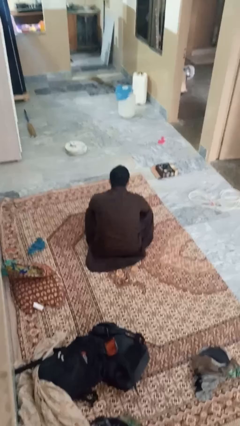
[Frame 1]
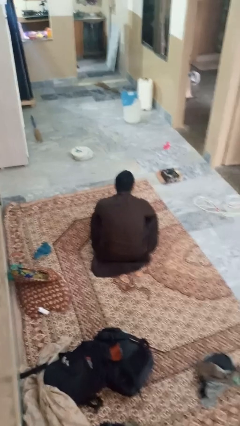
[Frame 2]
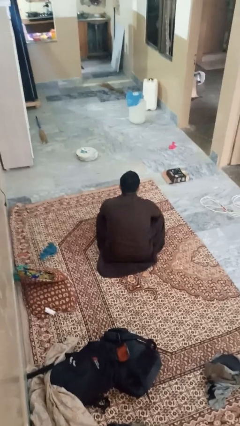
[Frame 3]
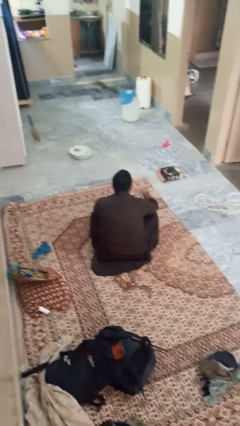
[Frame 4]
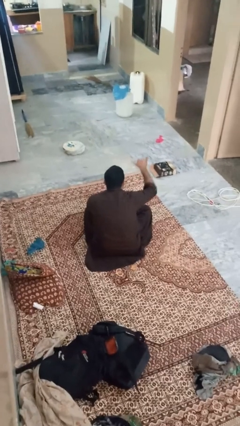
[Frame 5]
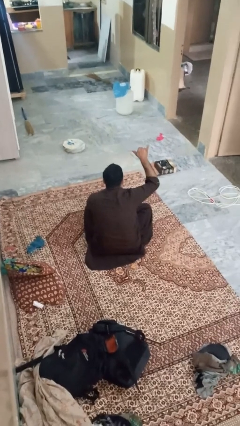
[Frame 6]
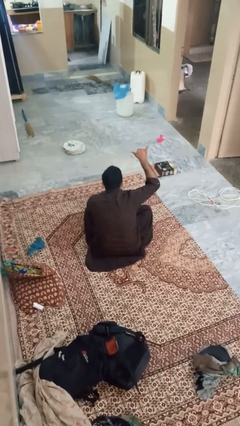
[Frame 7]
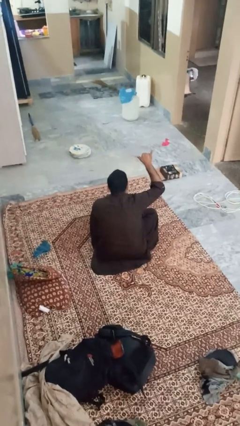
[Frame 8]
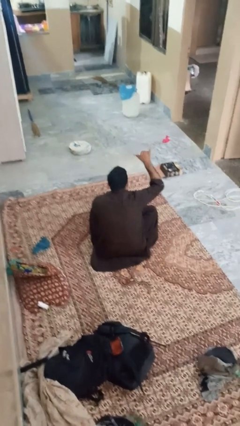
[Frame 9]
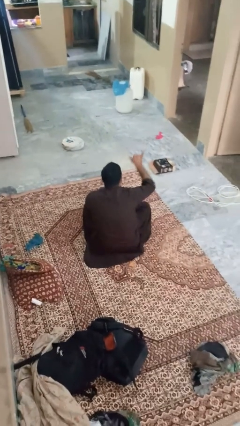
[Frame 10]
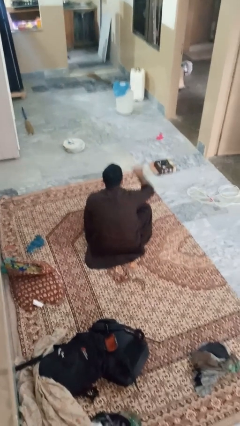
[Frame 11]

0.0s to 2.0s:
person gestures hang loose

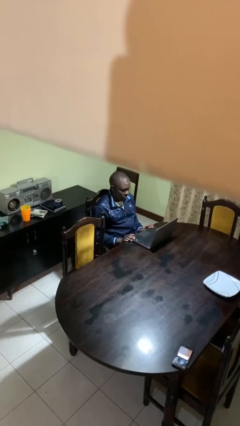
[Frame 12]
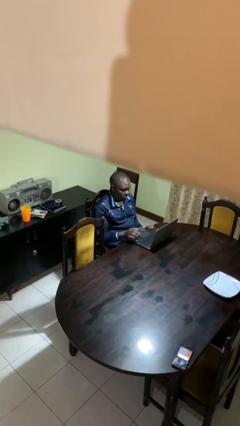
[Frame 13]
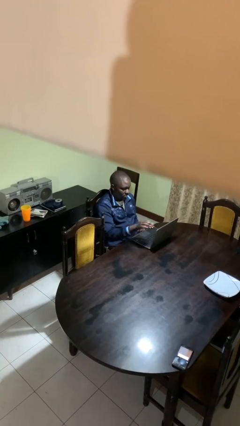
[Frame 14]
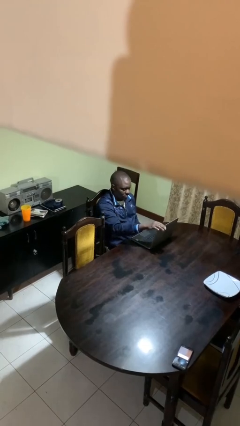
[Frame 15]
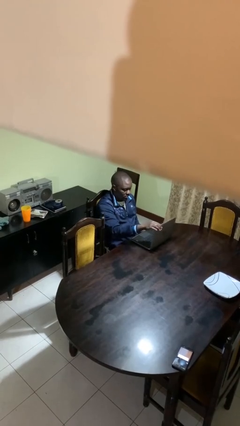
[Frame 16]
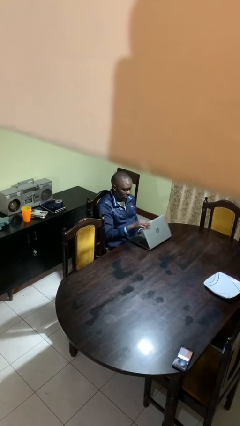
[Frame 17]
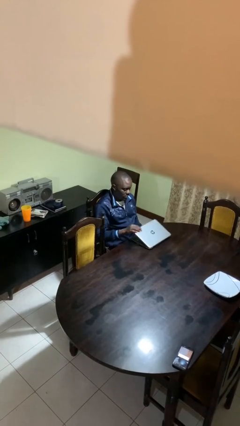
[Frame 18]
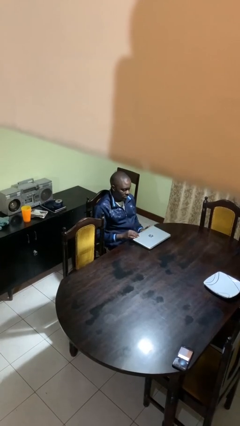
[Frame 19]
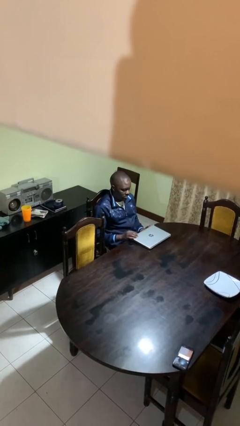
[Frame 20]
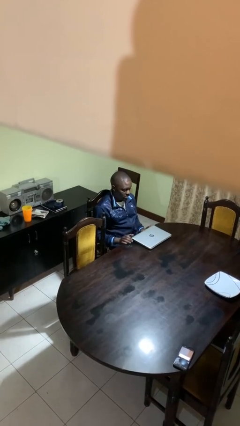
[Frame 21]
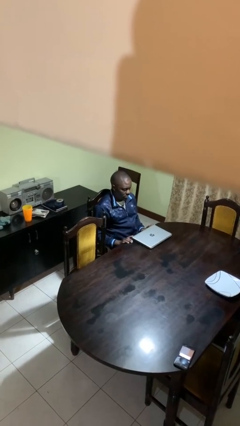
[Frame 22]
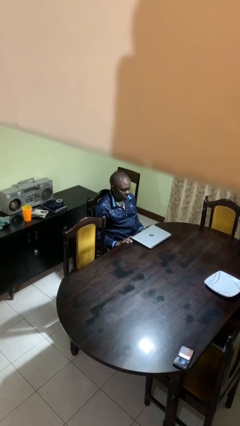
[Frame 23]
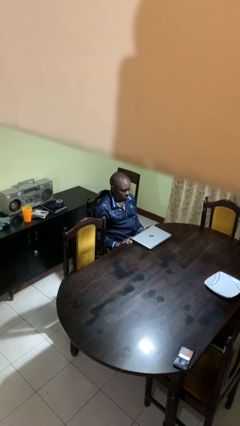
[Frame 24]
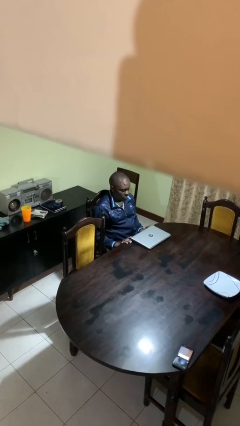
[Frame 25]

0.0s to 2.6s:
person closes laptop

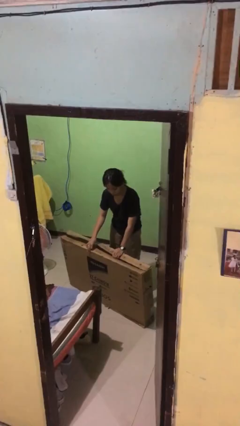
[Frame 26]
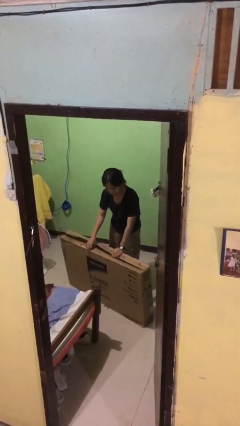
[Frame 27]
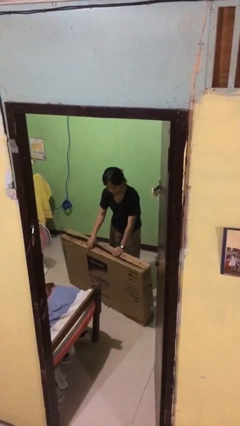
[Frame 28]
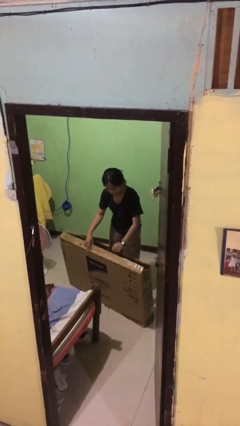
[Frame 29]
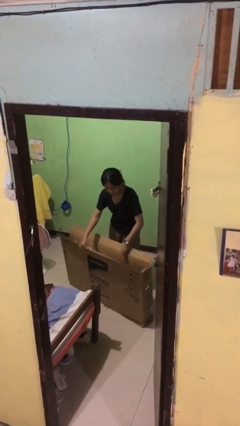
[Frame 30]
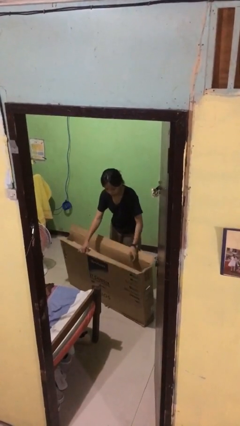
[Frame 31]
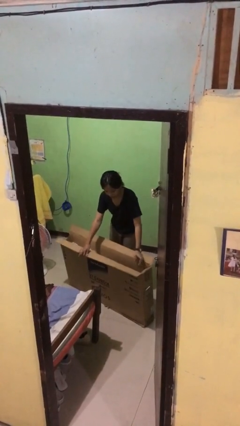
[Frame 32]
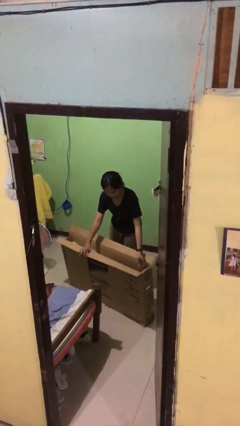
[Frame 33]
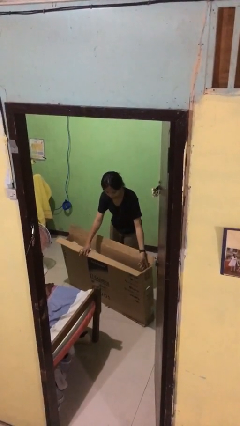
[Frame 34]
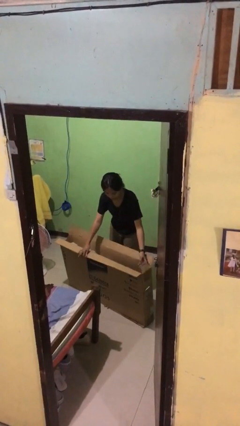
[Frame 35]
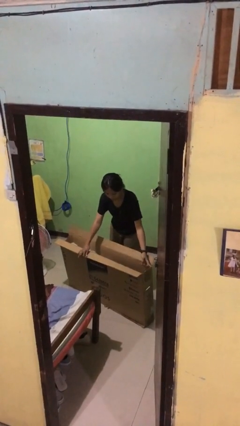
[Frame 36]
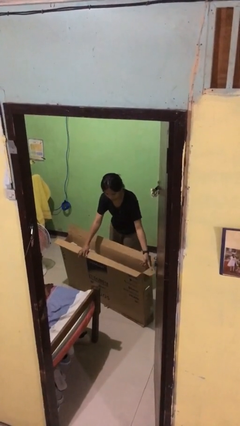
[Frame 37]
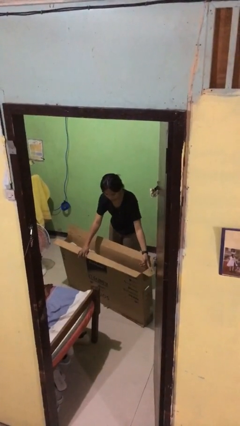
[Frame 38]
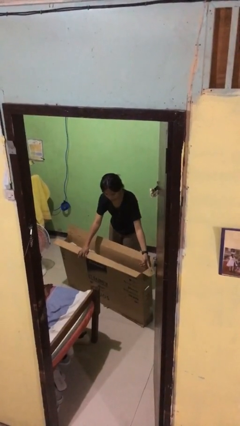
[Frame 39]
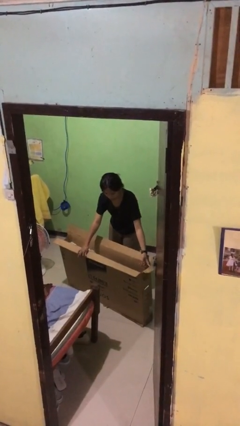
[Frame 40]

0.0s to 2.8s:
person opens box

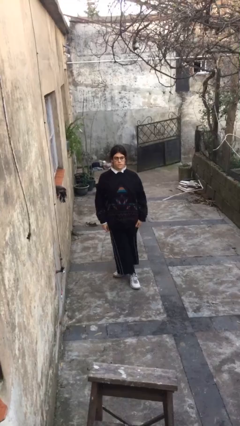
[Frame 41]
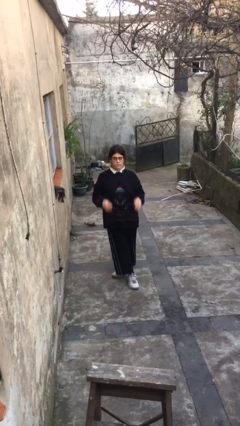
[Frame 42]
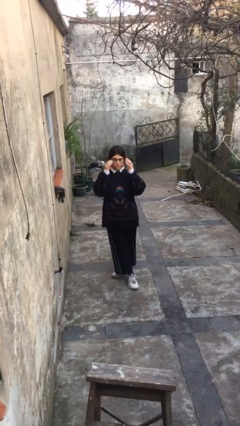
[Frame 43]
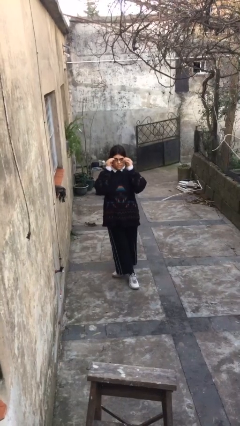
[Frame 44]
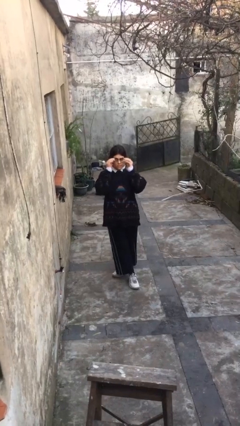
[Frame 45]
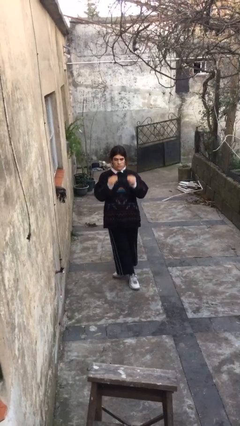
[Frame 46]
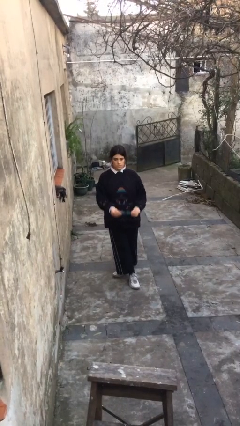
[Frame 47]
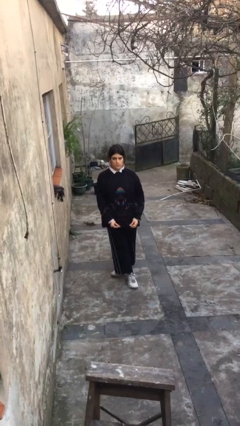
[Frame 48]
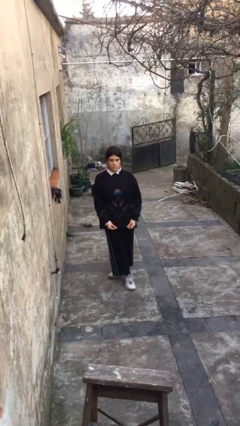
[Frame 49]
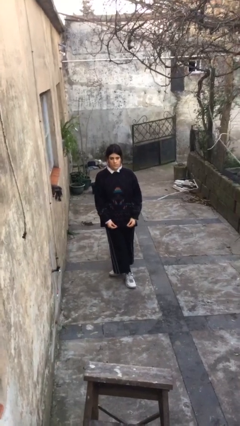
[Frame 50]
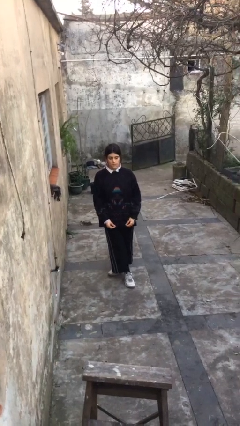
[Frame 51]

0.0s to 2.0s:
person takes off glasses

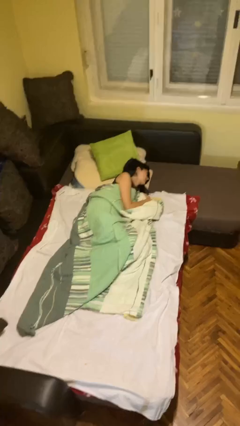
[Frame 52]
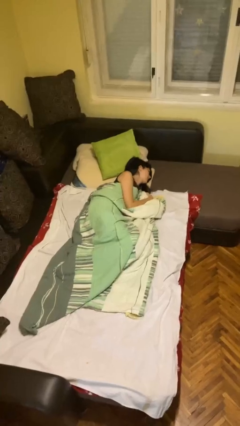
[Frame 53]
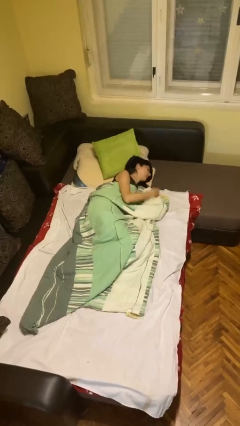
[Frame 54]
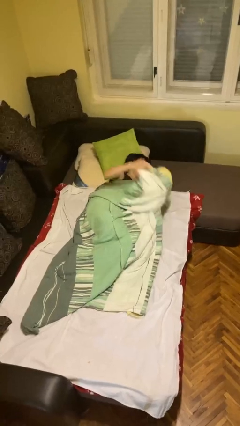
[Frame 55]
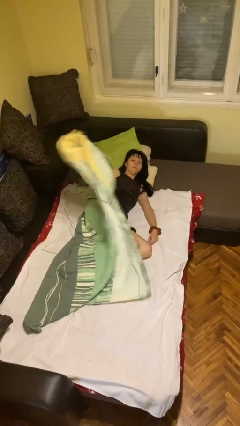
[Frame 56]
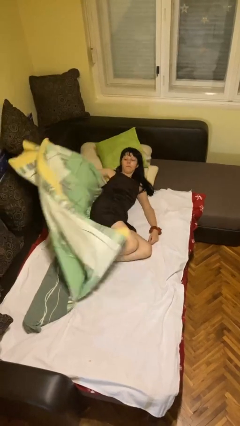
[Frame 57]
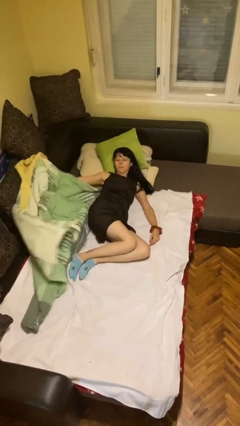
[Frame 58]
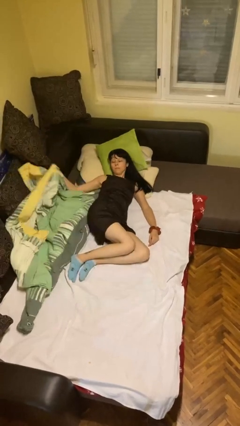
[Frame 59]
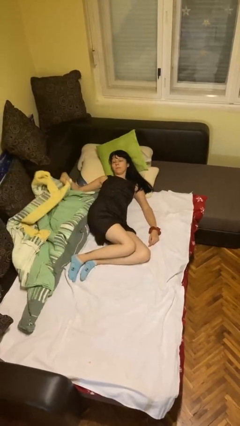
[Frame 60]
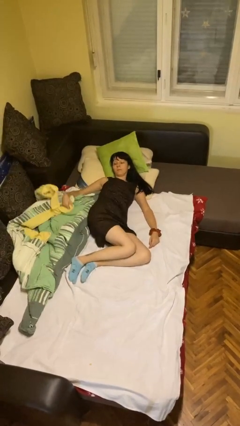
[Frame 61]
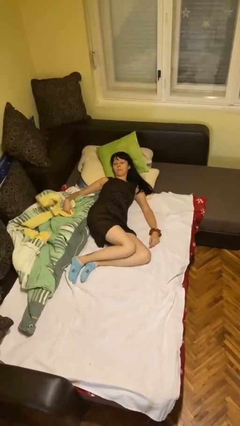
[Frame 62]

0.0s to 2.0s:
person uncovers with bedsheets

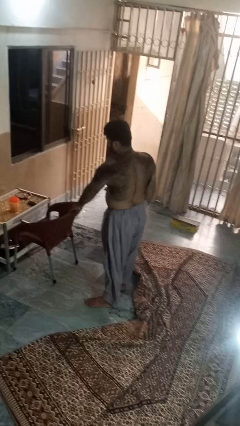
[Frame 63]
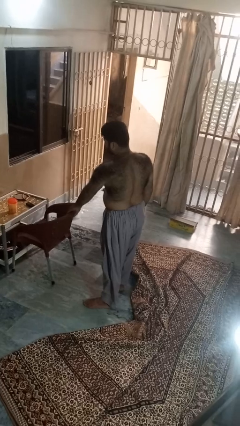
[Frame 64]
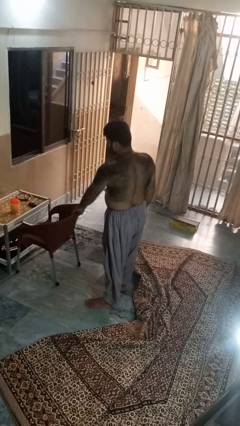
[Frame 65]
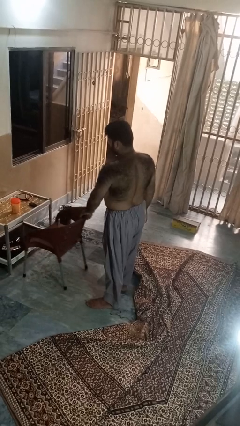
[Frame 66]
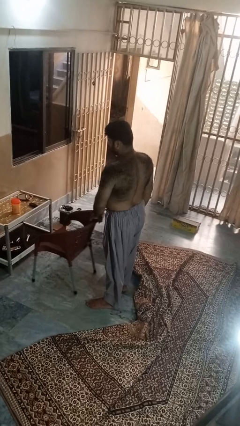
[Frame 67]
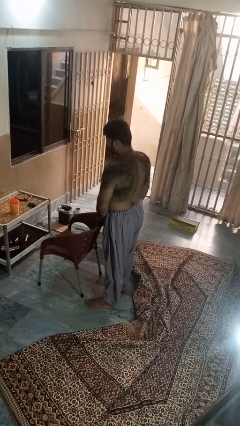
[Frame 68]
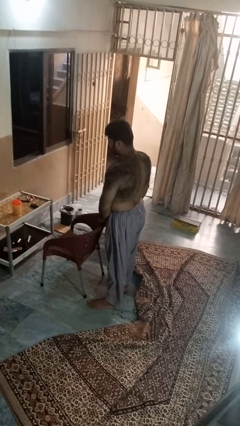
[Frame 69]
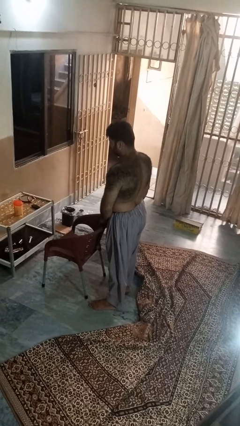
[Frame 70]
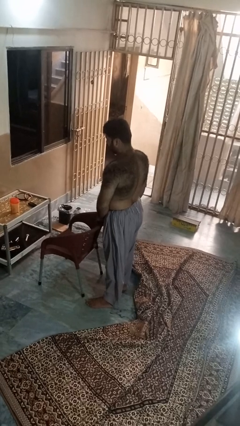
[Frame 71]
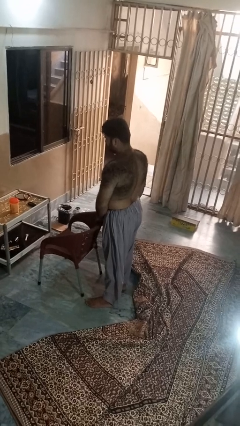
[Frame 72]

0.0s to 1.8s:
person pulls out chair

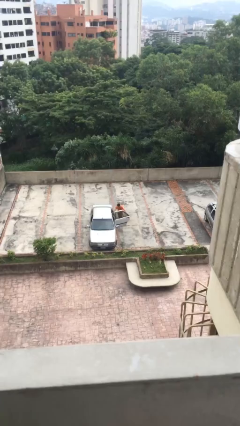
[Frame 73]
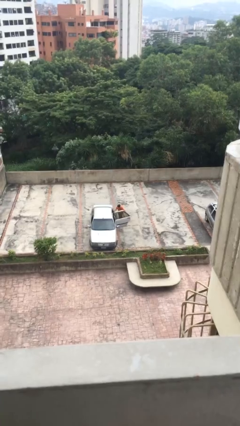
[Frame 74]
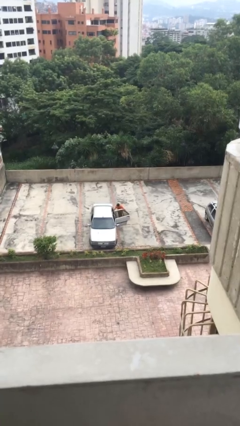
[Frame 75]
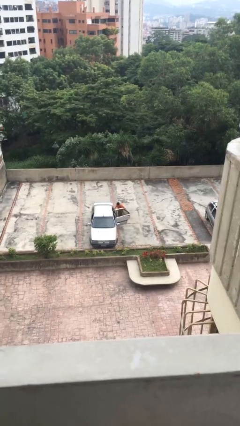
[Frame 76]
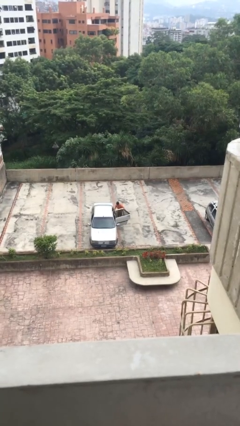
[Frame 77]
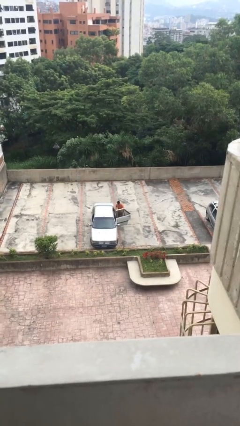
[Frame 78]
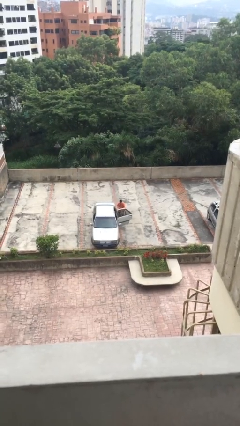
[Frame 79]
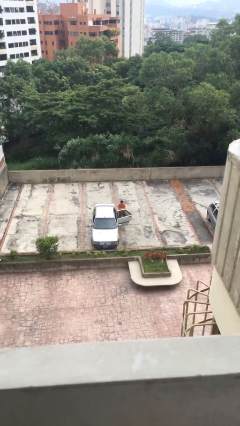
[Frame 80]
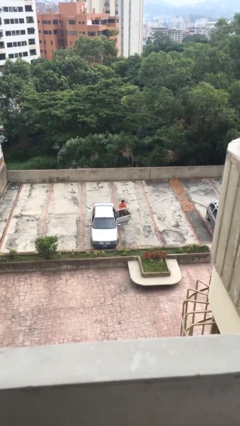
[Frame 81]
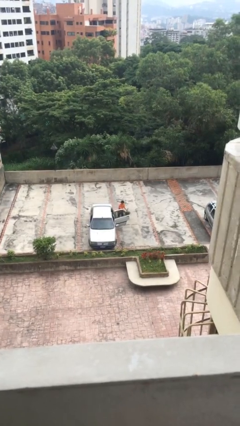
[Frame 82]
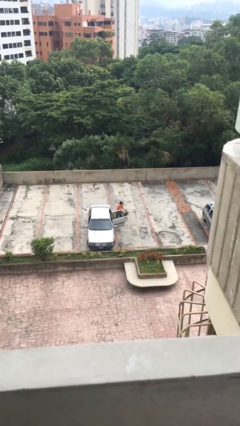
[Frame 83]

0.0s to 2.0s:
person unloads car

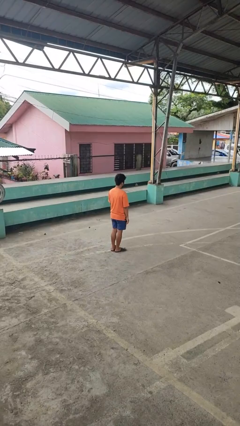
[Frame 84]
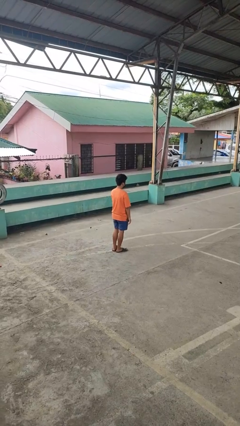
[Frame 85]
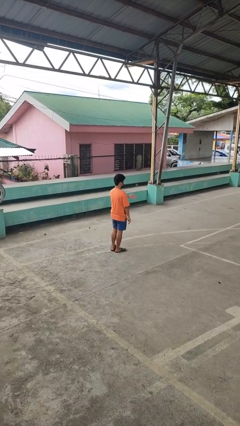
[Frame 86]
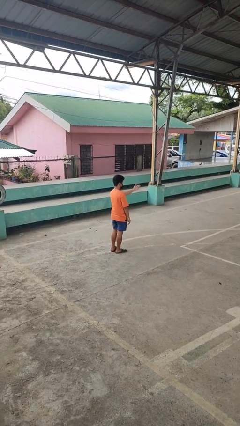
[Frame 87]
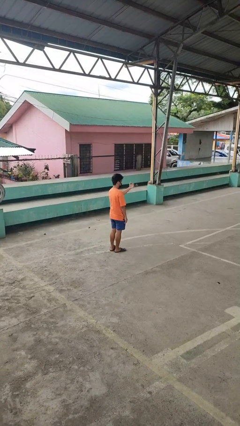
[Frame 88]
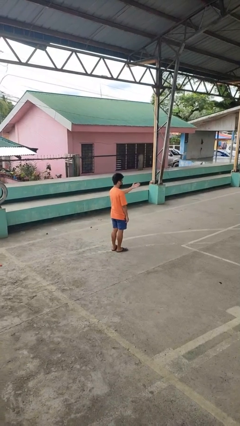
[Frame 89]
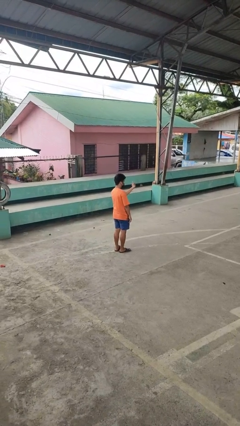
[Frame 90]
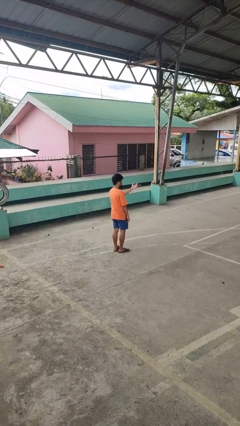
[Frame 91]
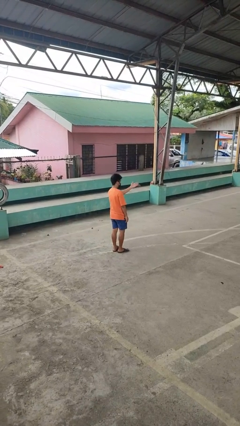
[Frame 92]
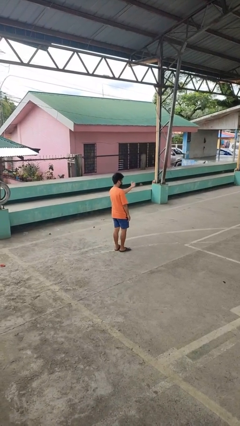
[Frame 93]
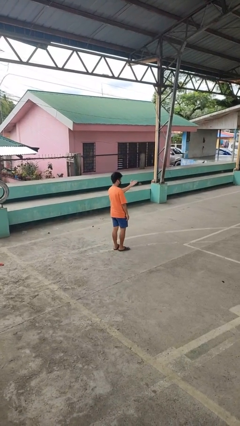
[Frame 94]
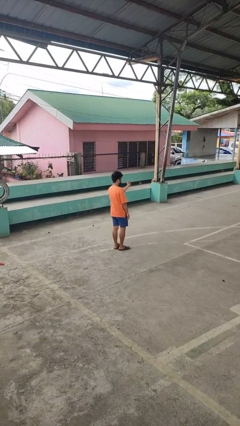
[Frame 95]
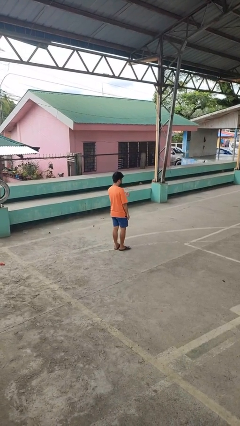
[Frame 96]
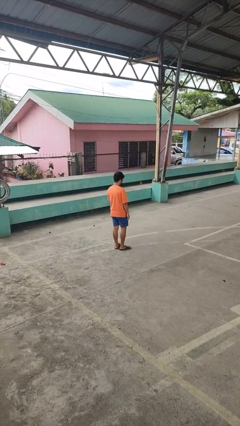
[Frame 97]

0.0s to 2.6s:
person gestures come here
